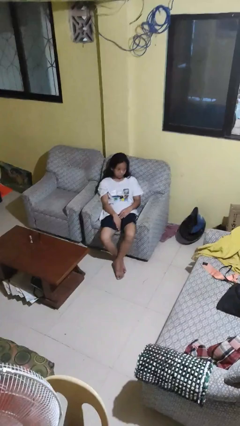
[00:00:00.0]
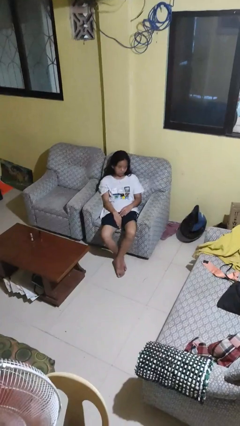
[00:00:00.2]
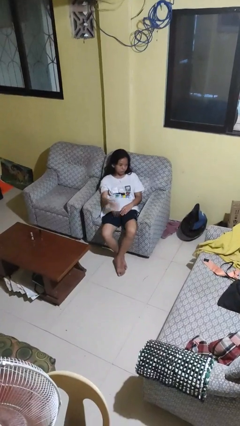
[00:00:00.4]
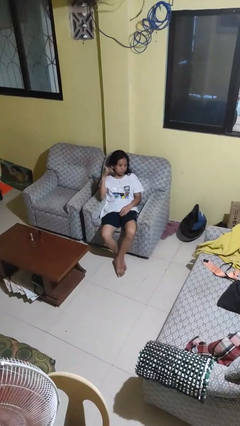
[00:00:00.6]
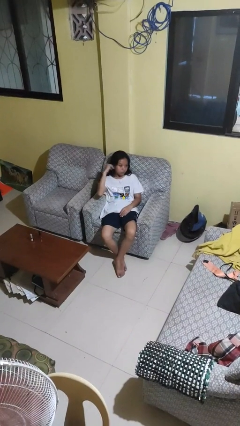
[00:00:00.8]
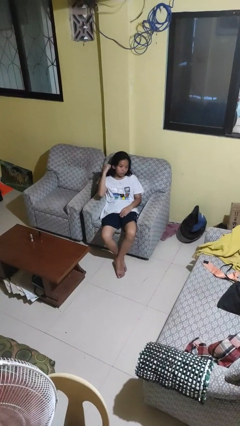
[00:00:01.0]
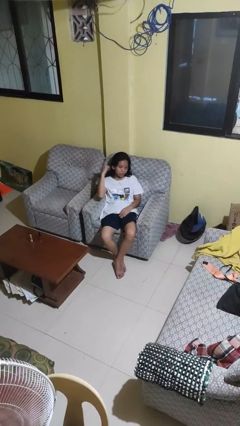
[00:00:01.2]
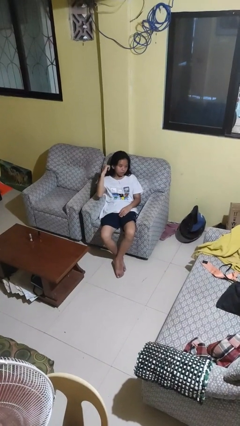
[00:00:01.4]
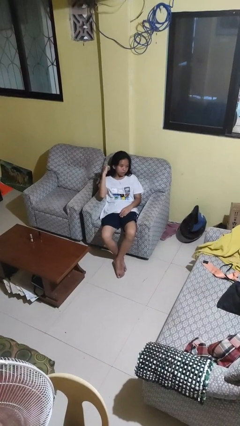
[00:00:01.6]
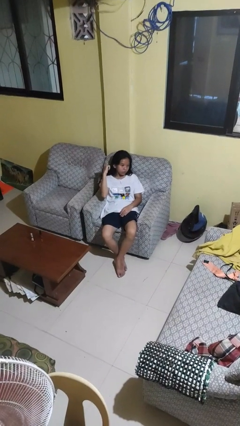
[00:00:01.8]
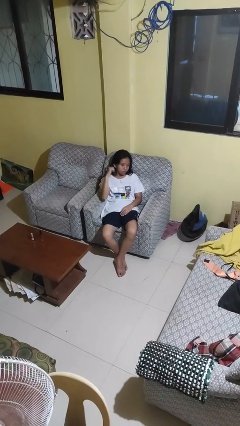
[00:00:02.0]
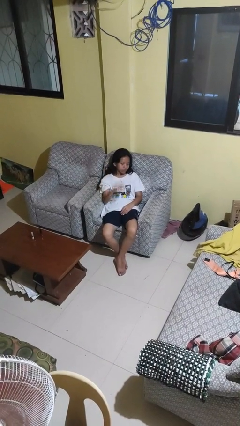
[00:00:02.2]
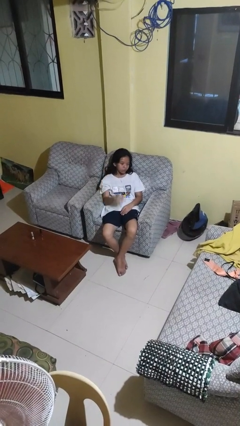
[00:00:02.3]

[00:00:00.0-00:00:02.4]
person gestures behind me

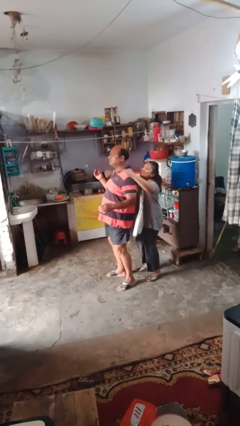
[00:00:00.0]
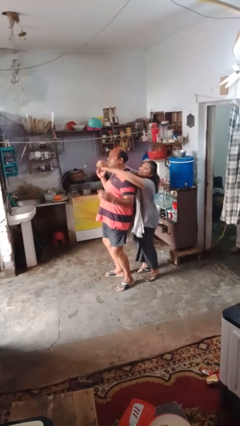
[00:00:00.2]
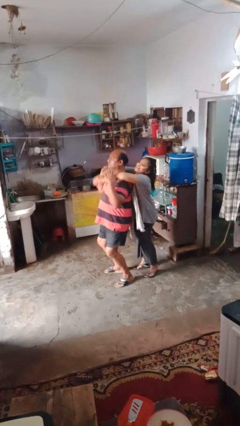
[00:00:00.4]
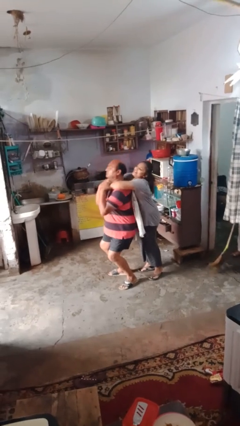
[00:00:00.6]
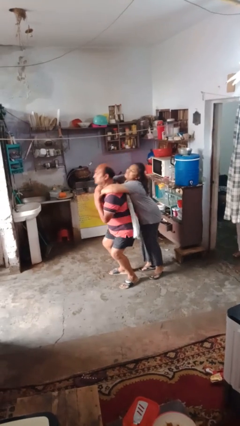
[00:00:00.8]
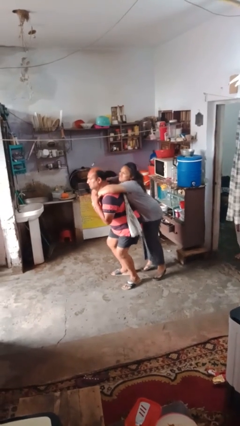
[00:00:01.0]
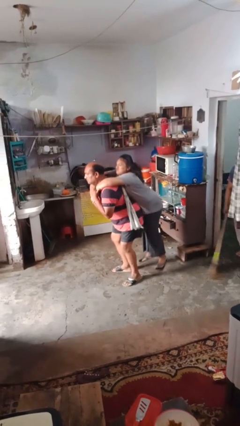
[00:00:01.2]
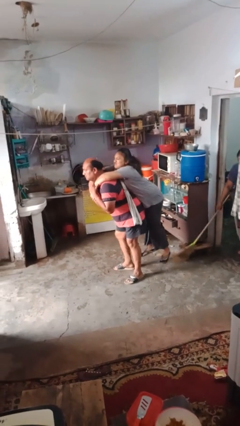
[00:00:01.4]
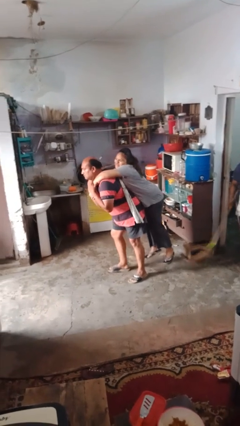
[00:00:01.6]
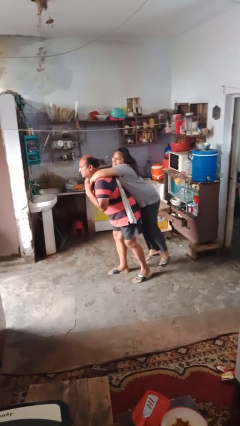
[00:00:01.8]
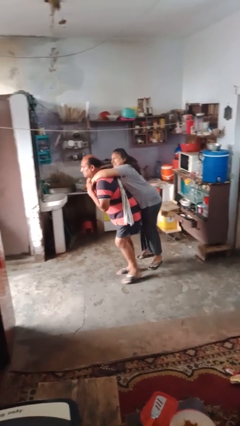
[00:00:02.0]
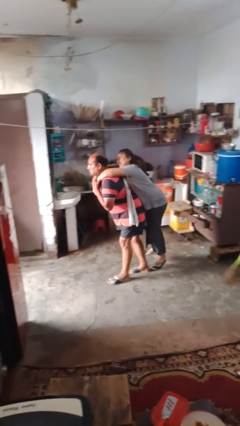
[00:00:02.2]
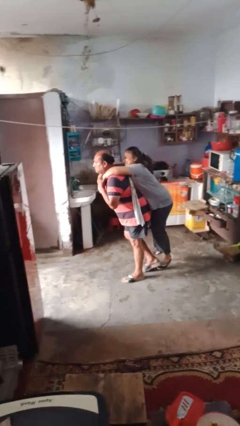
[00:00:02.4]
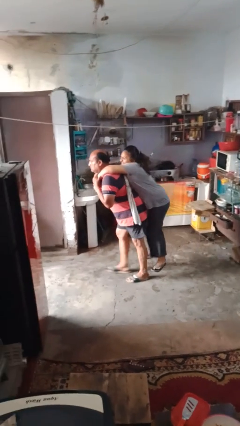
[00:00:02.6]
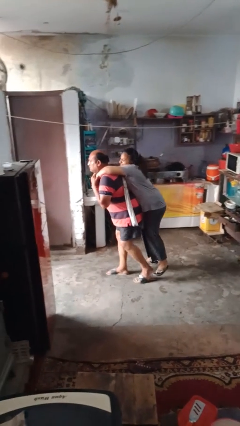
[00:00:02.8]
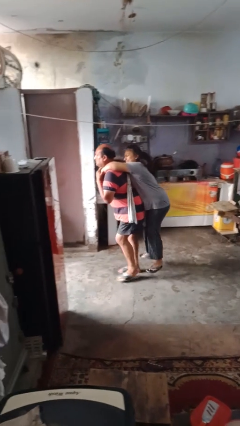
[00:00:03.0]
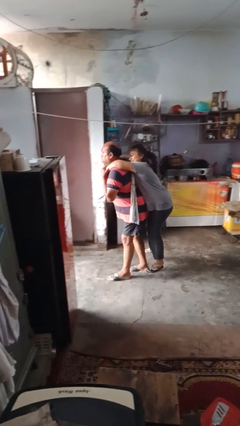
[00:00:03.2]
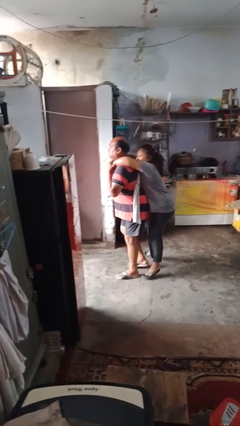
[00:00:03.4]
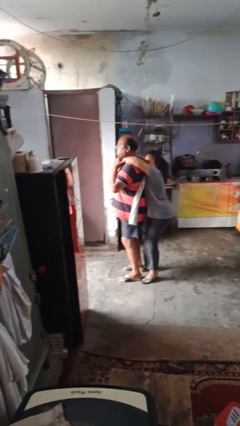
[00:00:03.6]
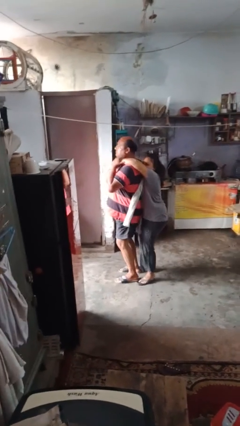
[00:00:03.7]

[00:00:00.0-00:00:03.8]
person carries person on back

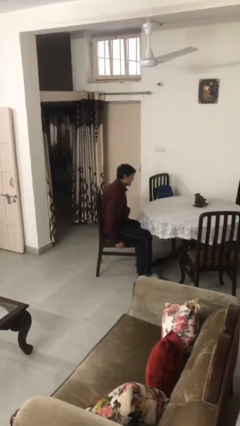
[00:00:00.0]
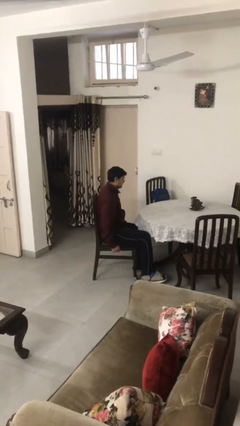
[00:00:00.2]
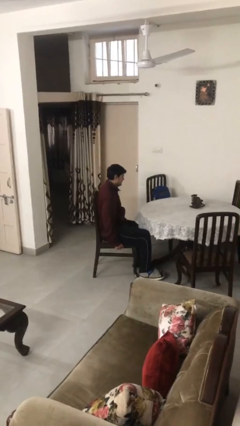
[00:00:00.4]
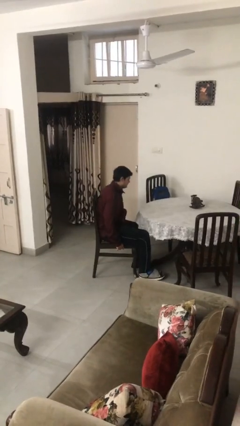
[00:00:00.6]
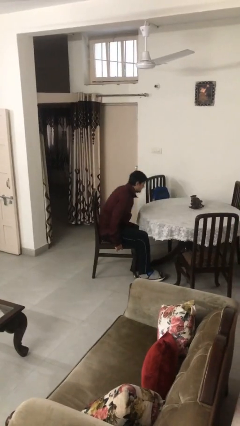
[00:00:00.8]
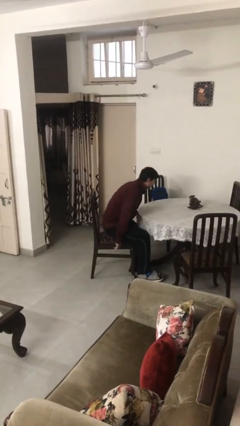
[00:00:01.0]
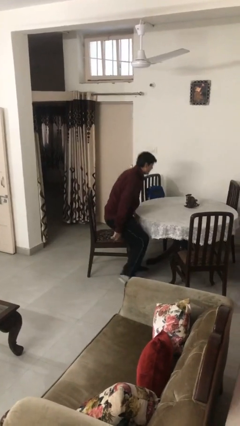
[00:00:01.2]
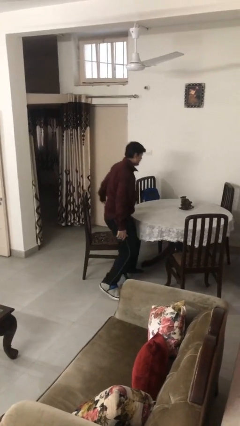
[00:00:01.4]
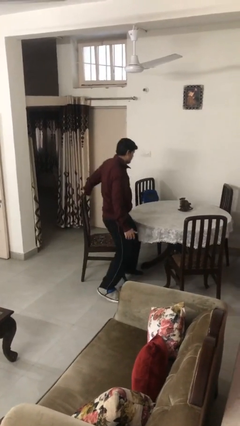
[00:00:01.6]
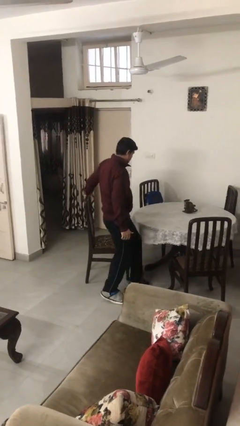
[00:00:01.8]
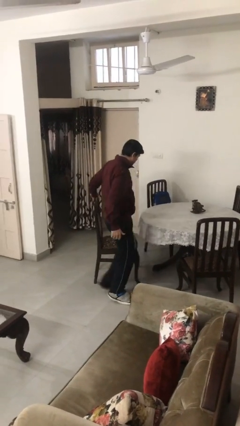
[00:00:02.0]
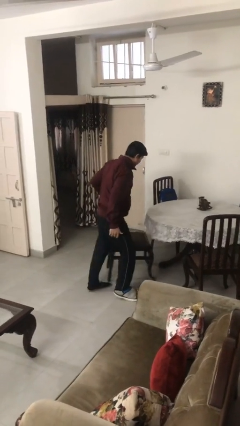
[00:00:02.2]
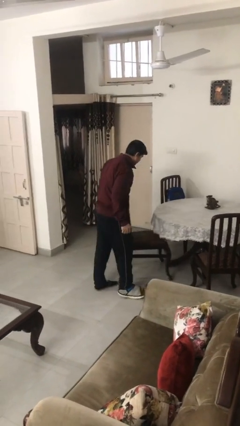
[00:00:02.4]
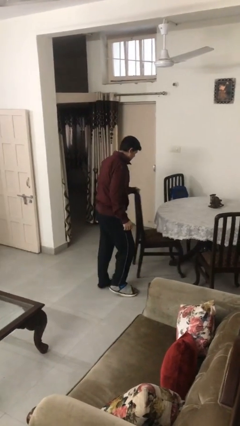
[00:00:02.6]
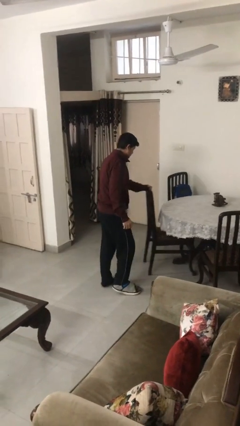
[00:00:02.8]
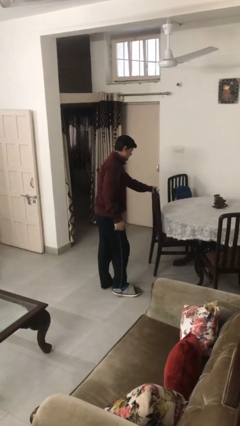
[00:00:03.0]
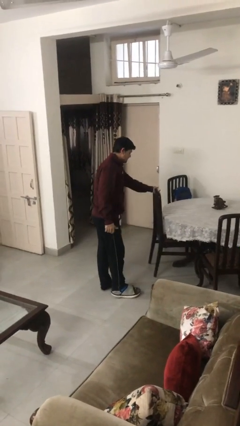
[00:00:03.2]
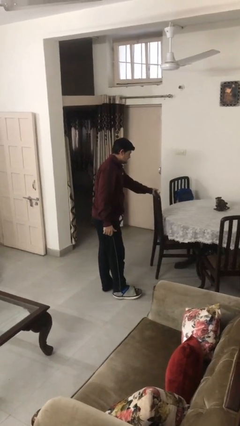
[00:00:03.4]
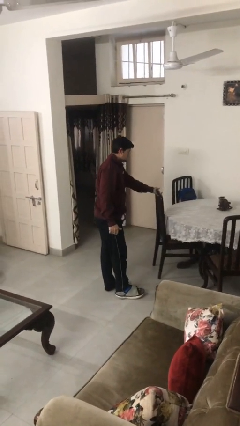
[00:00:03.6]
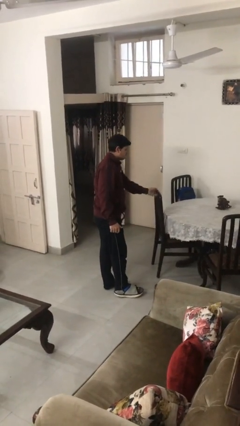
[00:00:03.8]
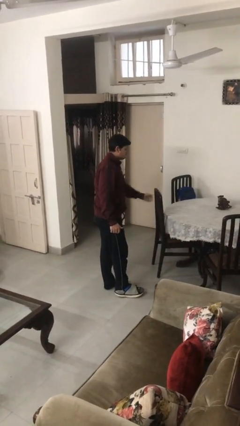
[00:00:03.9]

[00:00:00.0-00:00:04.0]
person stands up

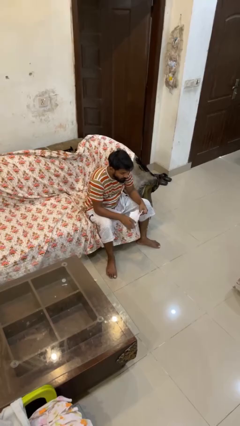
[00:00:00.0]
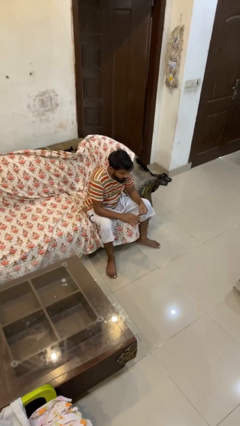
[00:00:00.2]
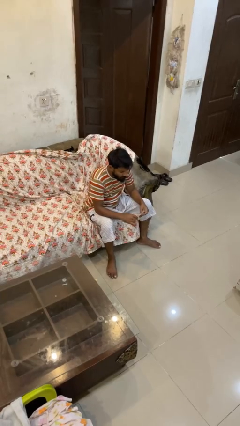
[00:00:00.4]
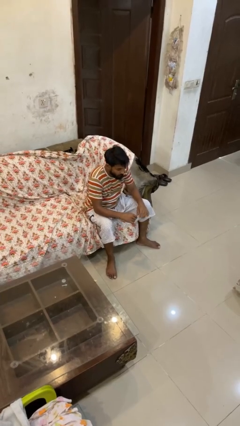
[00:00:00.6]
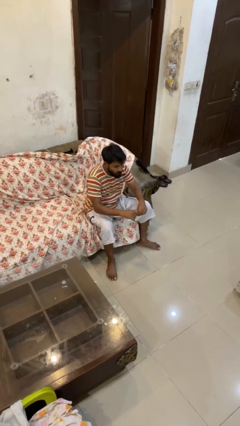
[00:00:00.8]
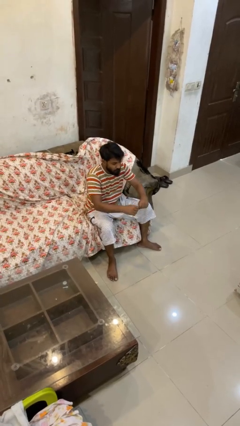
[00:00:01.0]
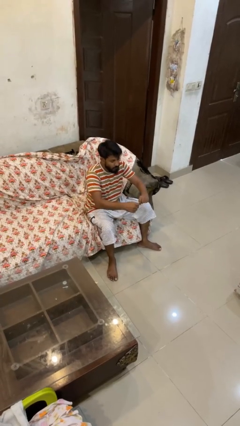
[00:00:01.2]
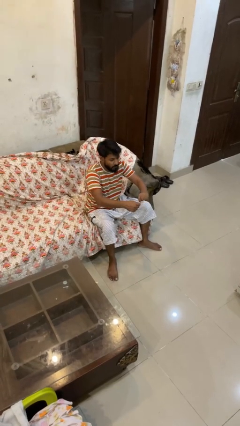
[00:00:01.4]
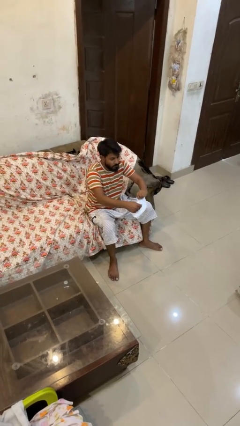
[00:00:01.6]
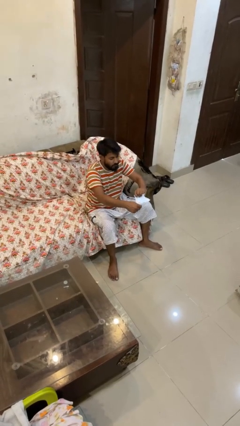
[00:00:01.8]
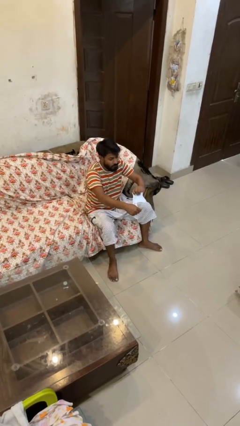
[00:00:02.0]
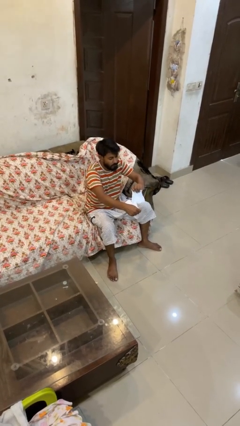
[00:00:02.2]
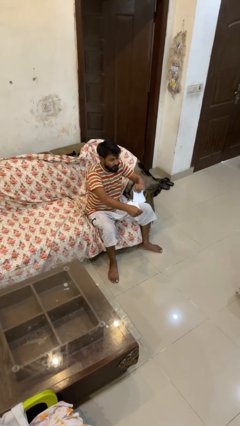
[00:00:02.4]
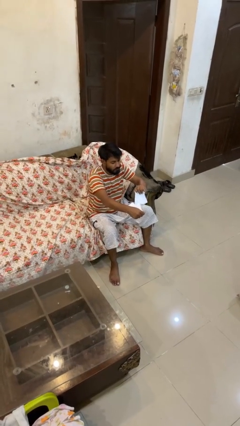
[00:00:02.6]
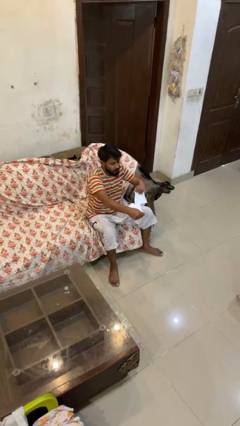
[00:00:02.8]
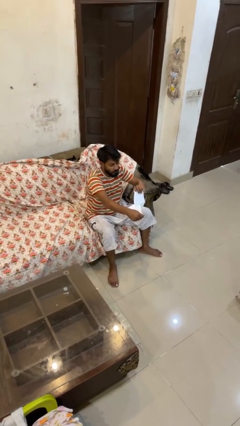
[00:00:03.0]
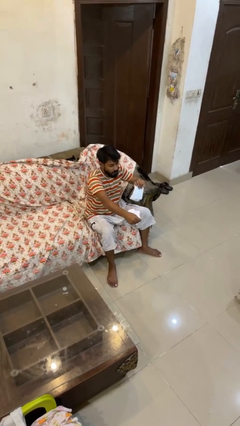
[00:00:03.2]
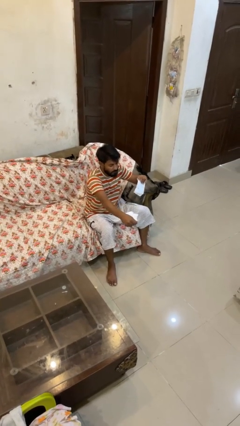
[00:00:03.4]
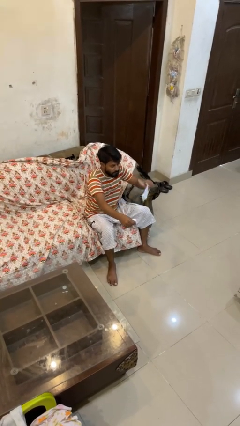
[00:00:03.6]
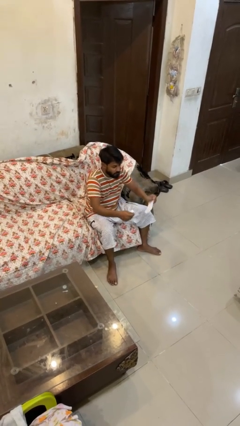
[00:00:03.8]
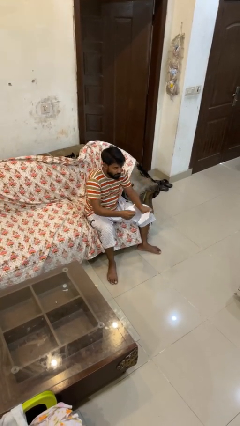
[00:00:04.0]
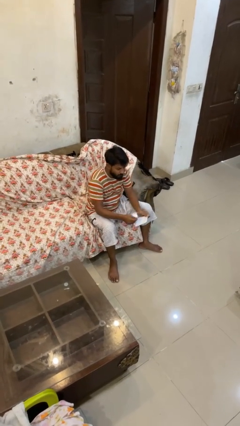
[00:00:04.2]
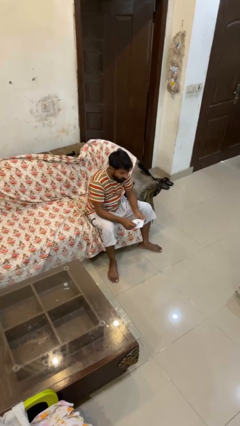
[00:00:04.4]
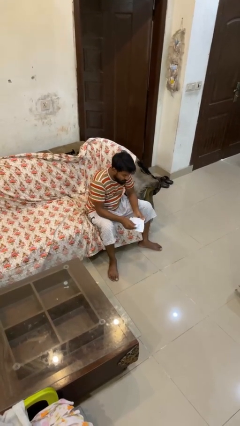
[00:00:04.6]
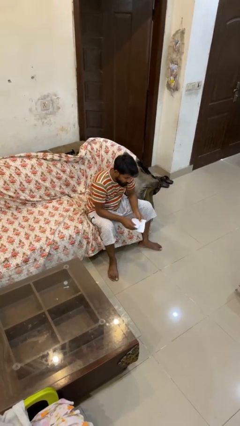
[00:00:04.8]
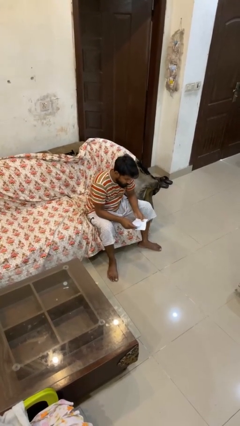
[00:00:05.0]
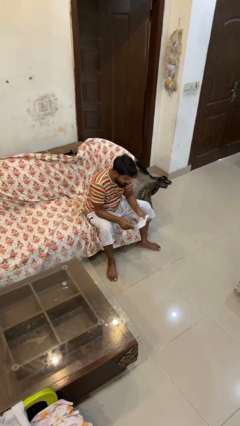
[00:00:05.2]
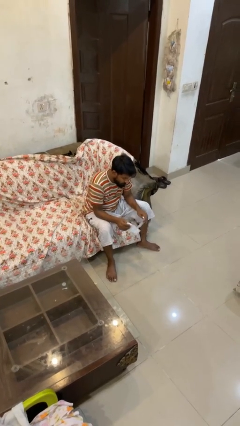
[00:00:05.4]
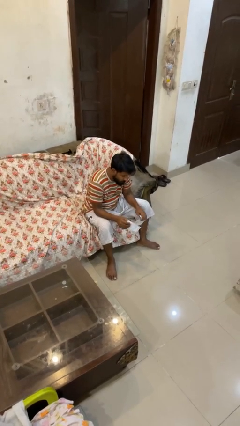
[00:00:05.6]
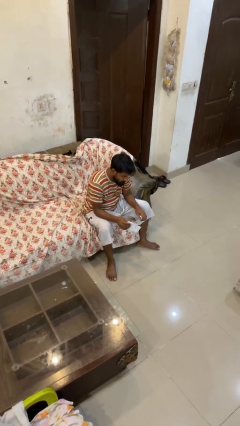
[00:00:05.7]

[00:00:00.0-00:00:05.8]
person tears paper

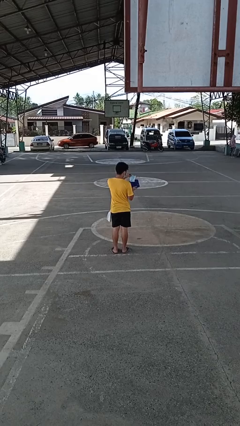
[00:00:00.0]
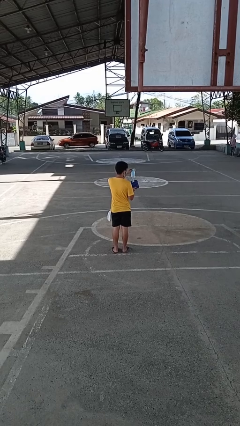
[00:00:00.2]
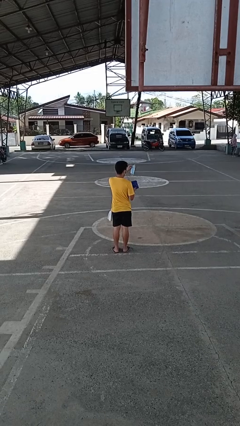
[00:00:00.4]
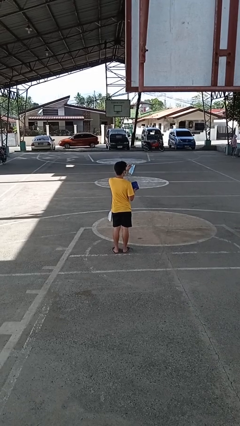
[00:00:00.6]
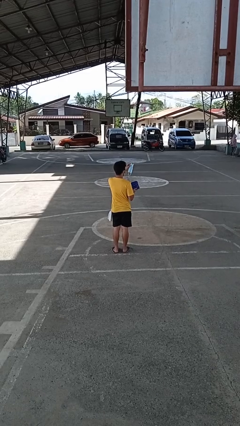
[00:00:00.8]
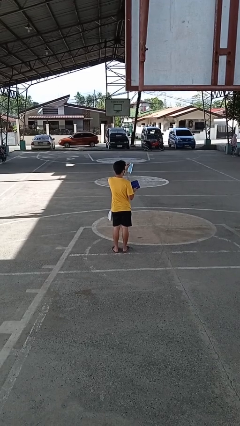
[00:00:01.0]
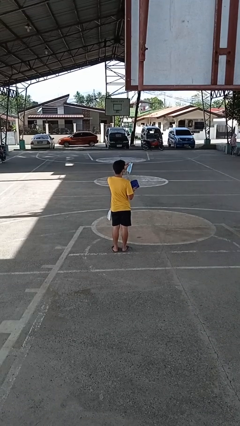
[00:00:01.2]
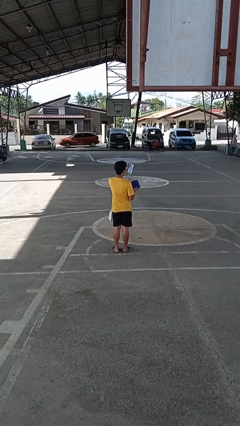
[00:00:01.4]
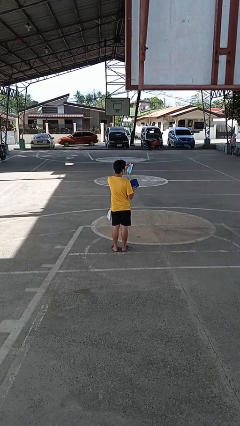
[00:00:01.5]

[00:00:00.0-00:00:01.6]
person takes object from purse
